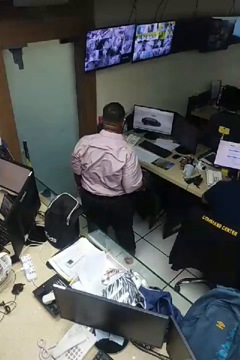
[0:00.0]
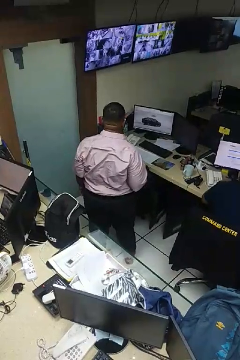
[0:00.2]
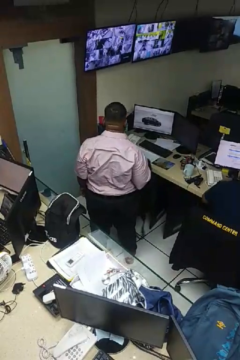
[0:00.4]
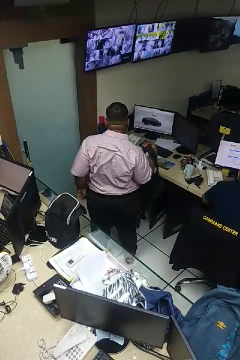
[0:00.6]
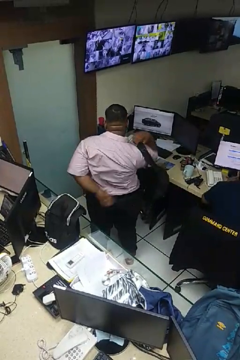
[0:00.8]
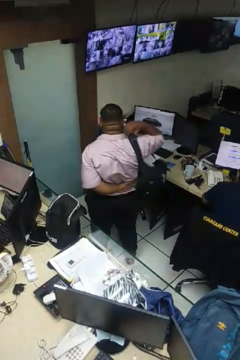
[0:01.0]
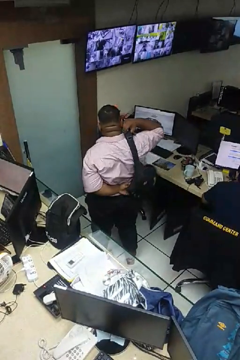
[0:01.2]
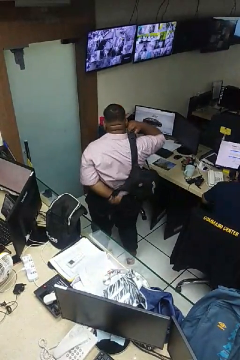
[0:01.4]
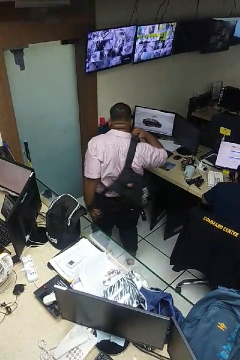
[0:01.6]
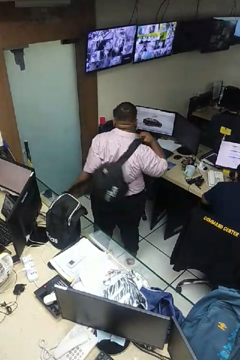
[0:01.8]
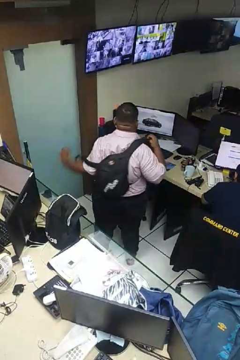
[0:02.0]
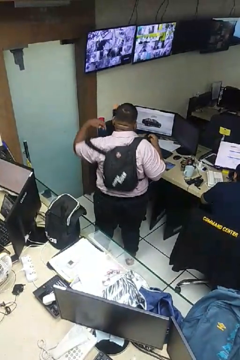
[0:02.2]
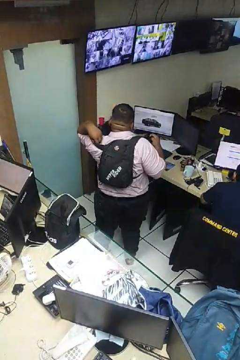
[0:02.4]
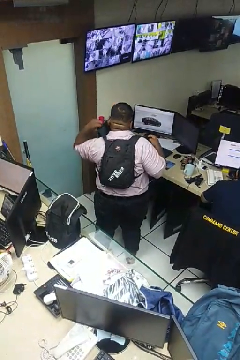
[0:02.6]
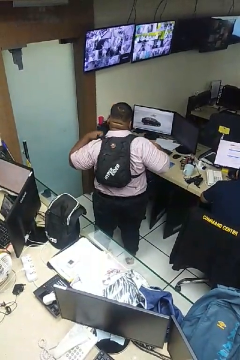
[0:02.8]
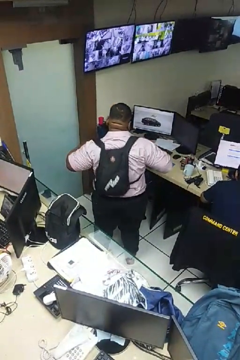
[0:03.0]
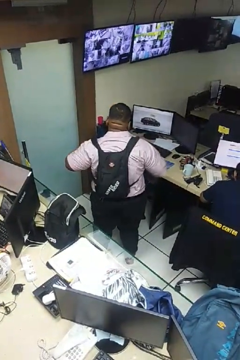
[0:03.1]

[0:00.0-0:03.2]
person puts on backpack

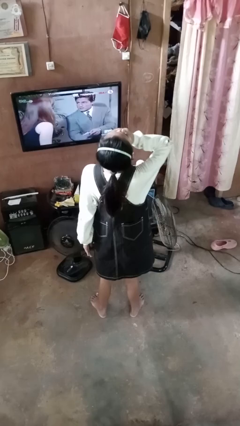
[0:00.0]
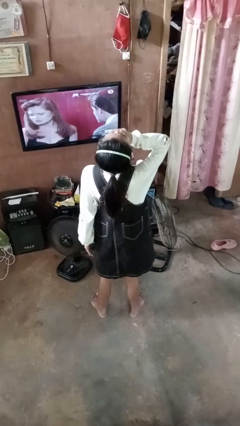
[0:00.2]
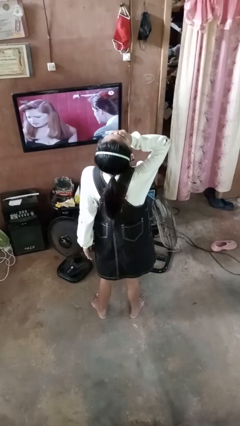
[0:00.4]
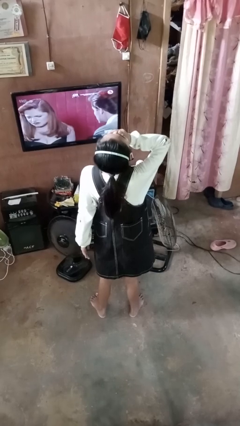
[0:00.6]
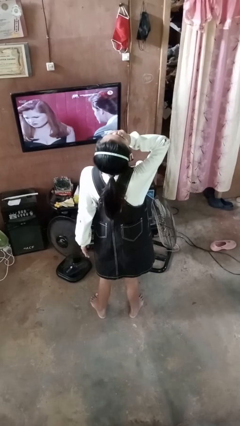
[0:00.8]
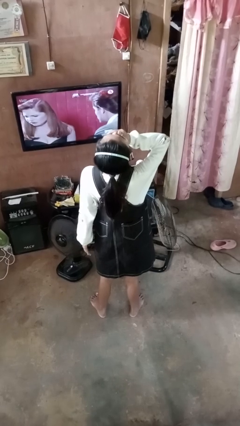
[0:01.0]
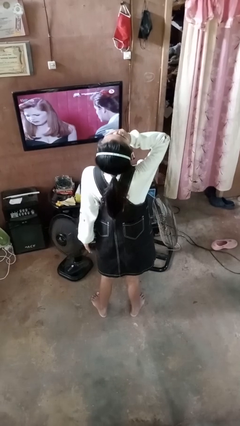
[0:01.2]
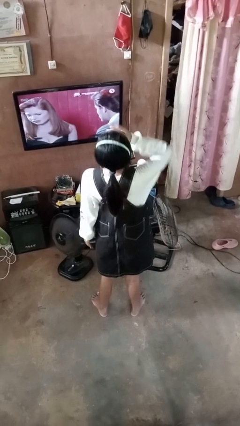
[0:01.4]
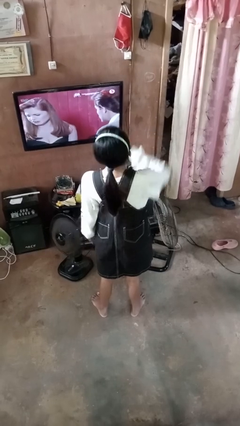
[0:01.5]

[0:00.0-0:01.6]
person yawns

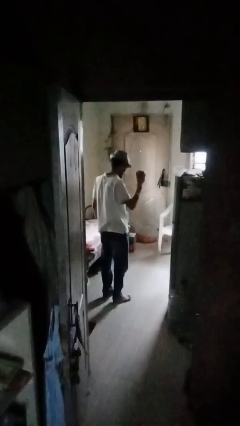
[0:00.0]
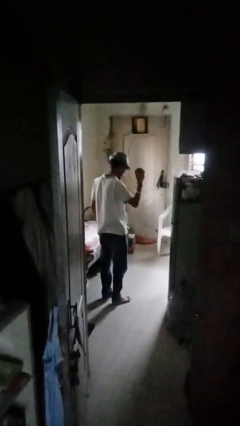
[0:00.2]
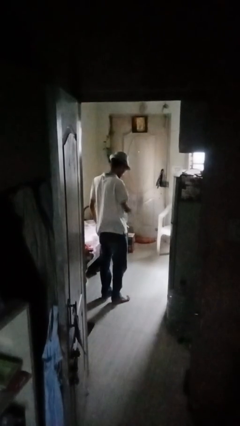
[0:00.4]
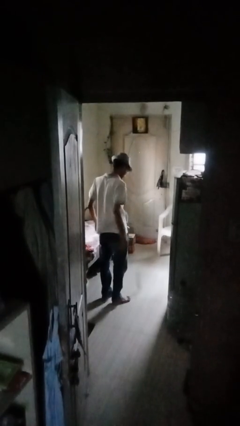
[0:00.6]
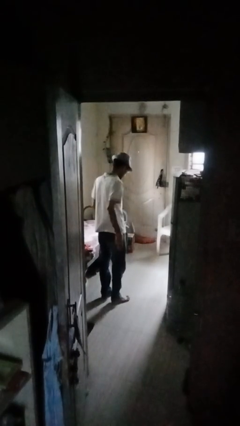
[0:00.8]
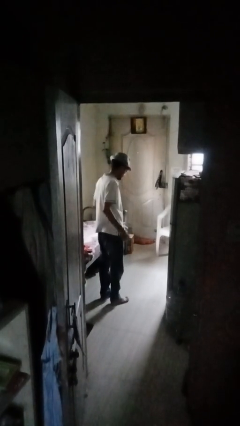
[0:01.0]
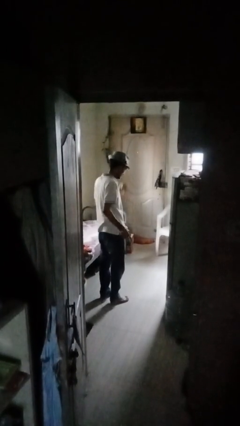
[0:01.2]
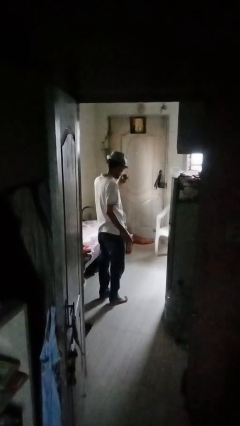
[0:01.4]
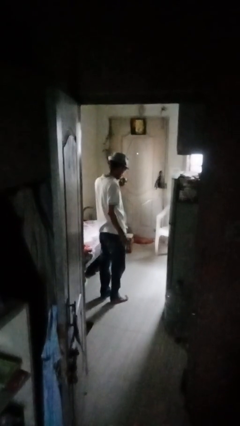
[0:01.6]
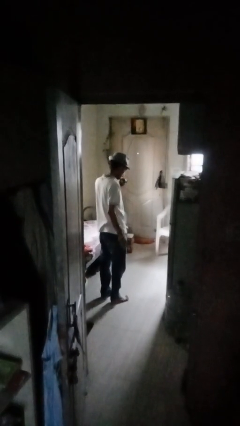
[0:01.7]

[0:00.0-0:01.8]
person bounces ball on floor

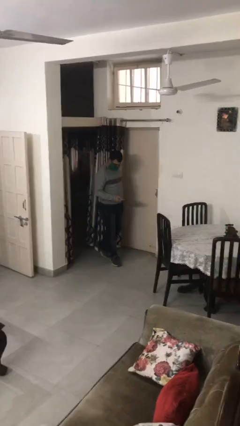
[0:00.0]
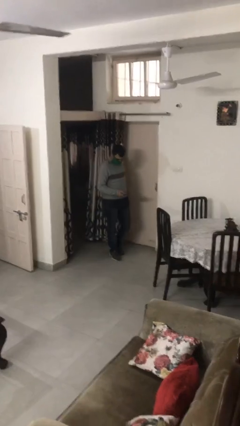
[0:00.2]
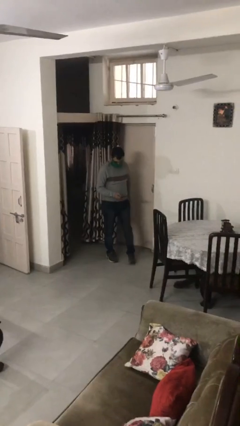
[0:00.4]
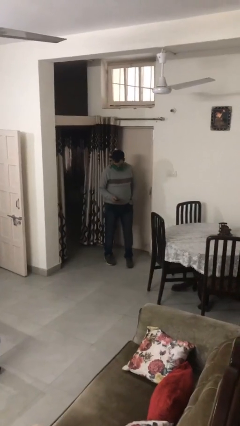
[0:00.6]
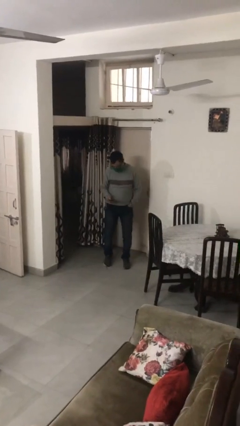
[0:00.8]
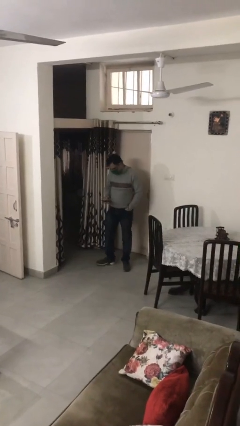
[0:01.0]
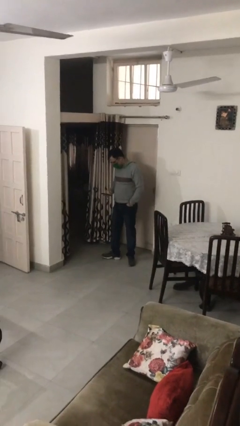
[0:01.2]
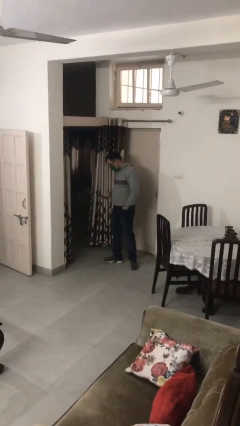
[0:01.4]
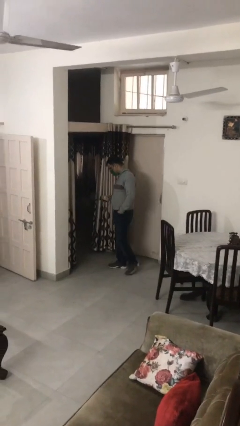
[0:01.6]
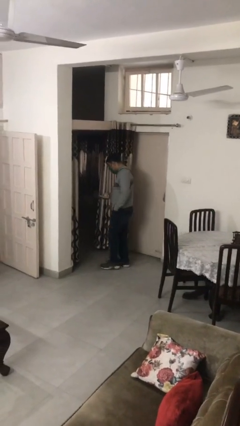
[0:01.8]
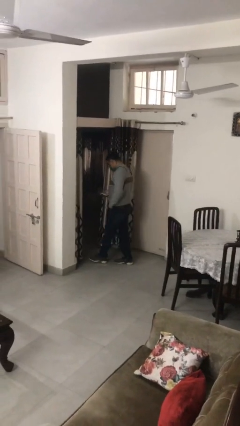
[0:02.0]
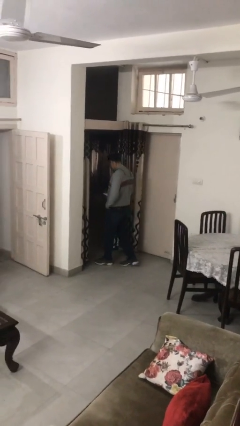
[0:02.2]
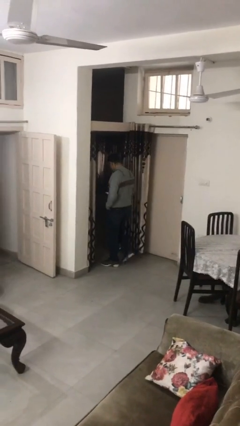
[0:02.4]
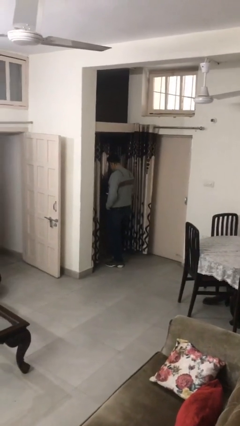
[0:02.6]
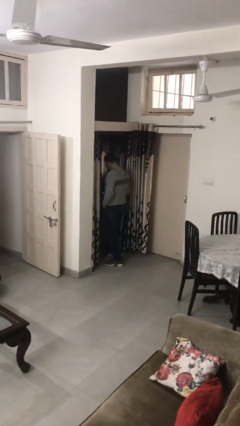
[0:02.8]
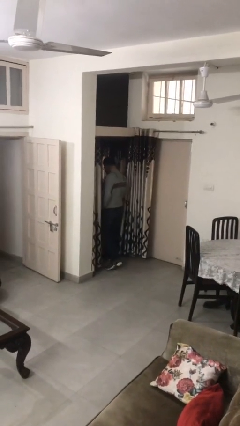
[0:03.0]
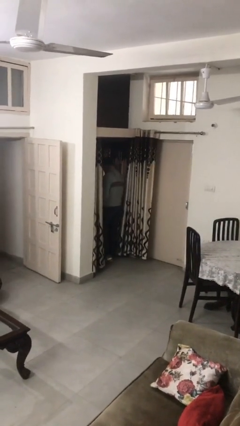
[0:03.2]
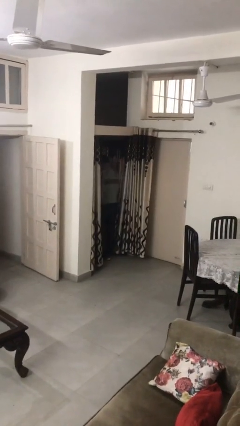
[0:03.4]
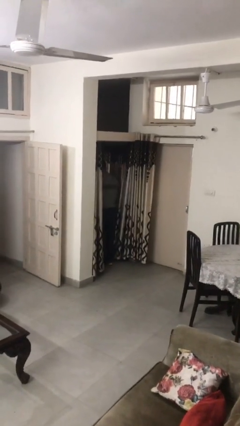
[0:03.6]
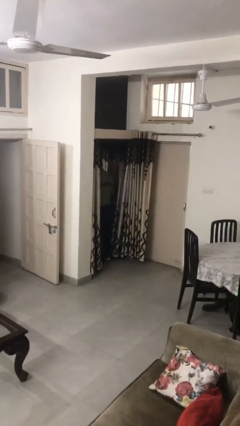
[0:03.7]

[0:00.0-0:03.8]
person exits scene through structure

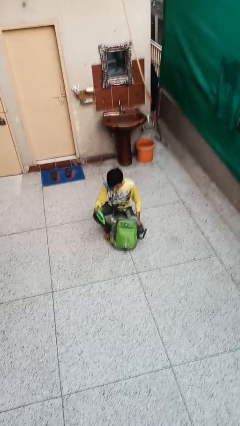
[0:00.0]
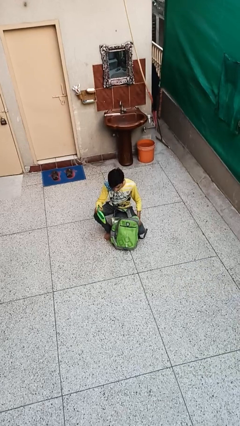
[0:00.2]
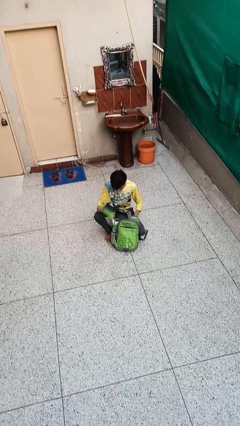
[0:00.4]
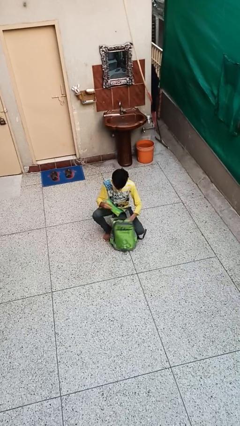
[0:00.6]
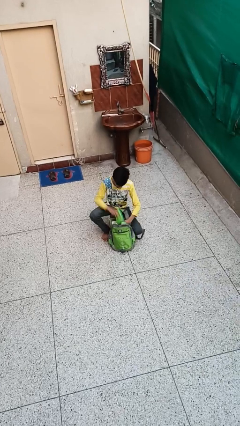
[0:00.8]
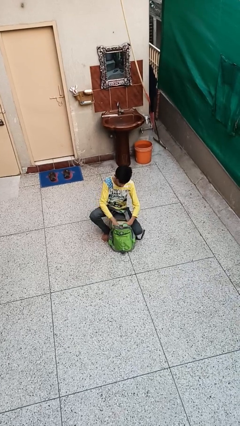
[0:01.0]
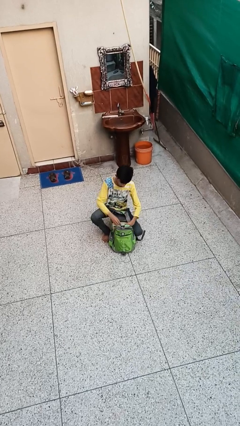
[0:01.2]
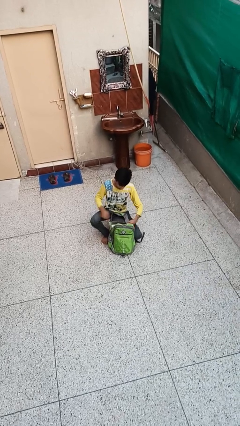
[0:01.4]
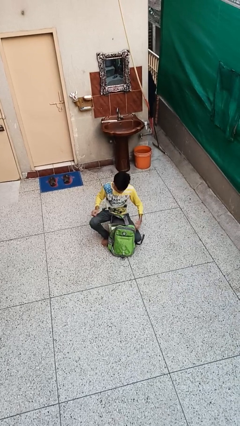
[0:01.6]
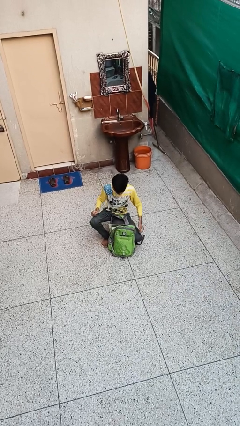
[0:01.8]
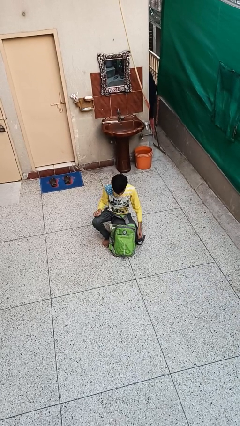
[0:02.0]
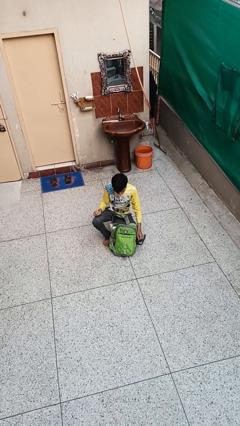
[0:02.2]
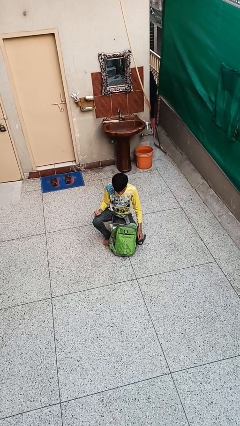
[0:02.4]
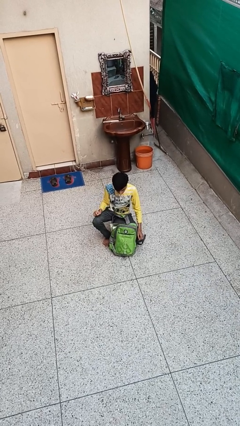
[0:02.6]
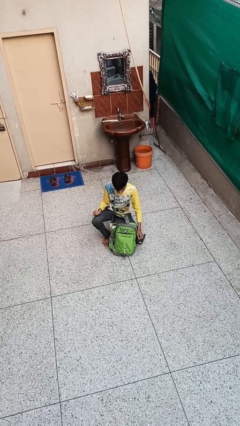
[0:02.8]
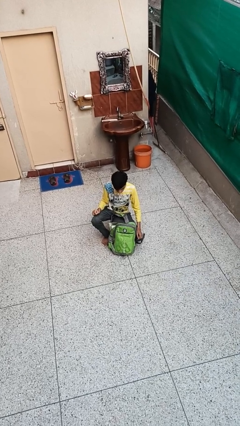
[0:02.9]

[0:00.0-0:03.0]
person puts object into backpack

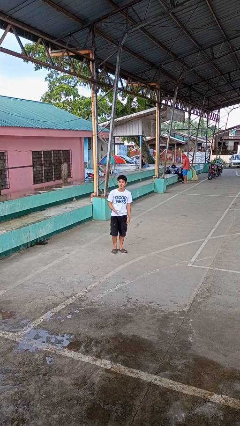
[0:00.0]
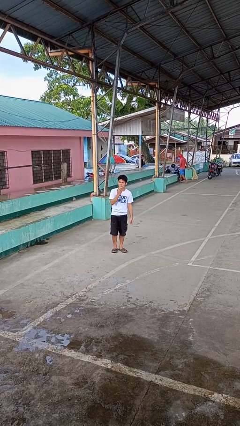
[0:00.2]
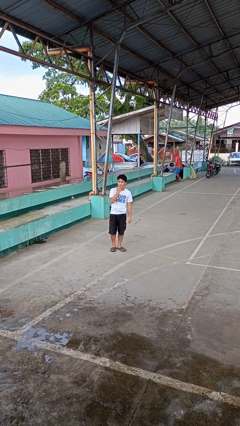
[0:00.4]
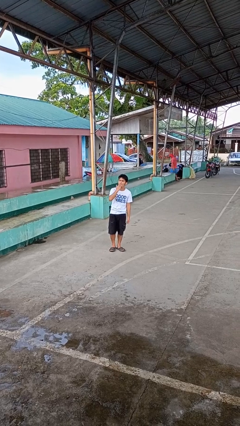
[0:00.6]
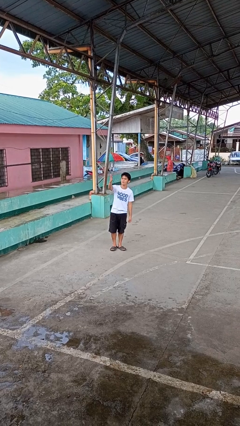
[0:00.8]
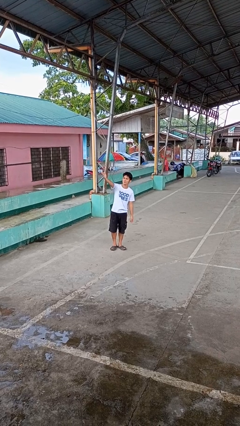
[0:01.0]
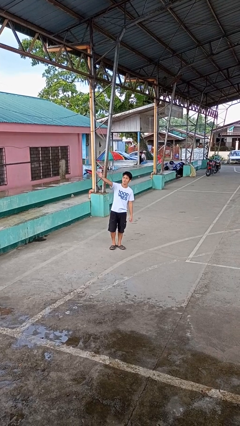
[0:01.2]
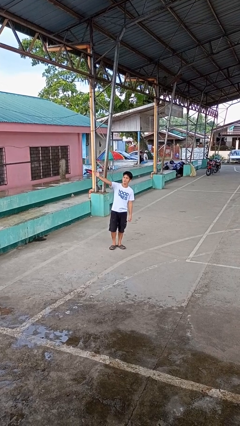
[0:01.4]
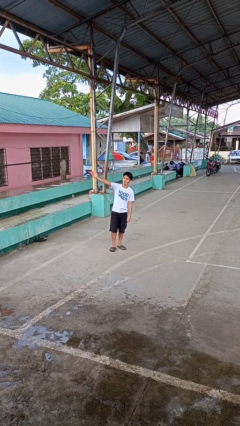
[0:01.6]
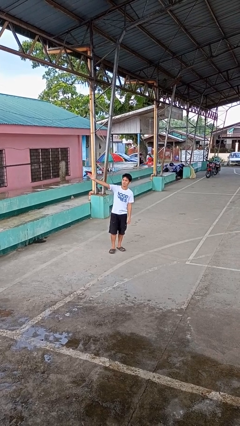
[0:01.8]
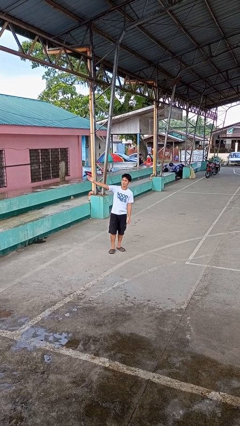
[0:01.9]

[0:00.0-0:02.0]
person gestures blow kiss

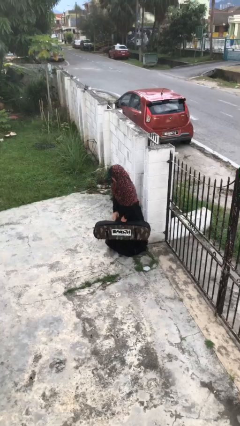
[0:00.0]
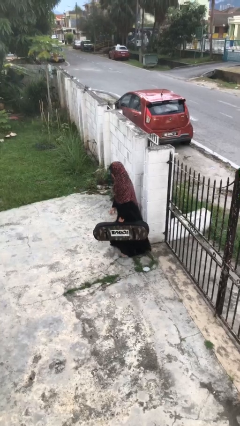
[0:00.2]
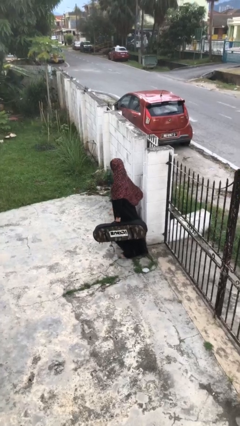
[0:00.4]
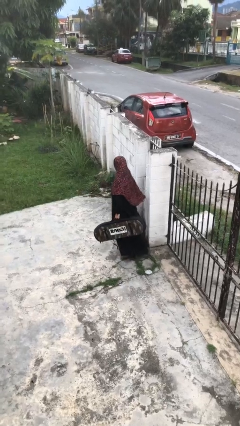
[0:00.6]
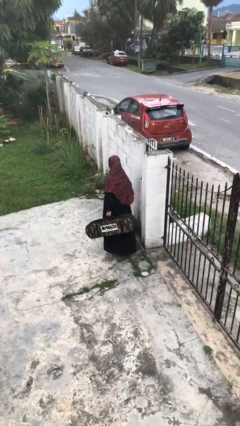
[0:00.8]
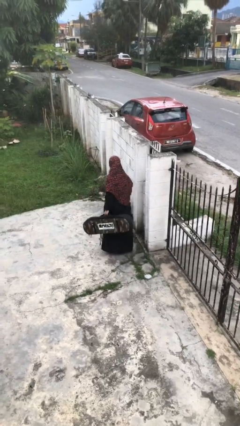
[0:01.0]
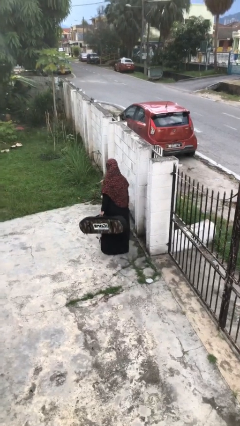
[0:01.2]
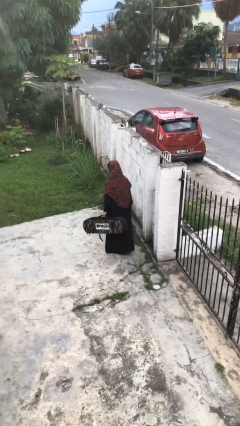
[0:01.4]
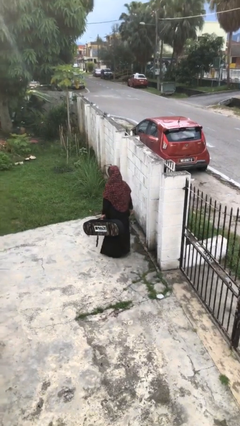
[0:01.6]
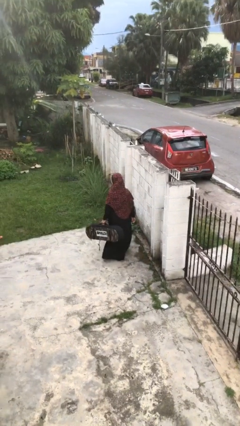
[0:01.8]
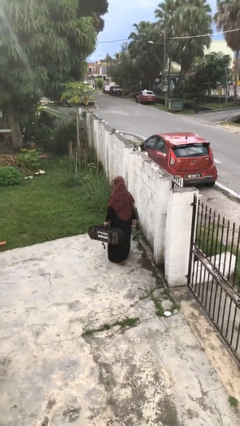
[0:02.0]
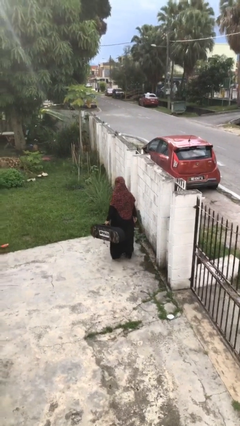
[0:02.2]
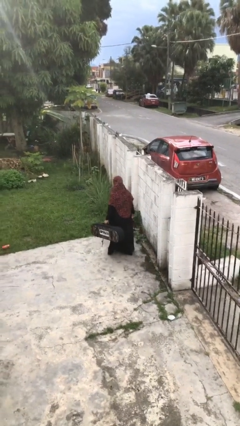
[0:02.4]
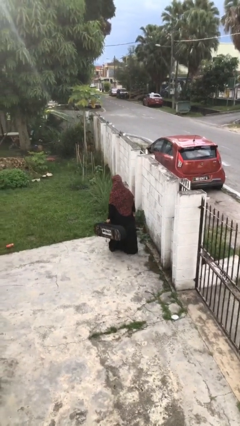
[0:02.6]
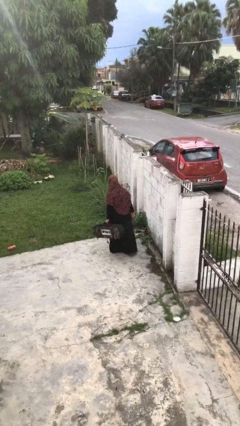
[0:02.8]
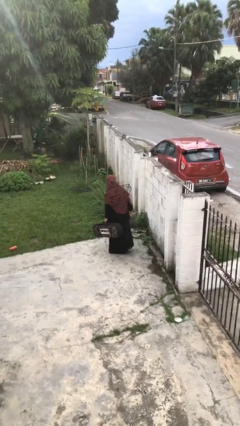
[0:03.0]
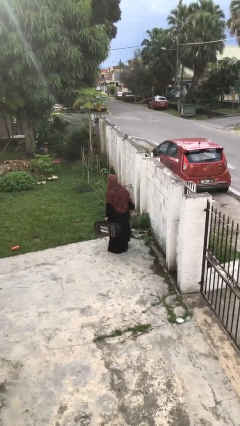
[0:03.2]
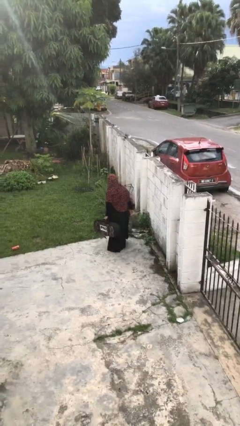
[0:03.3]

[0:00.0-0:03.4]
person carries heavy object
